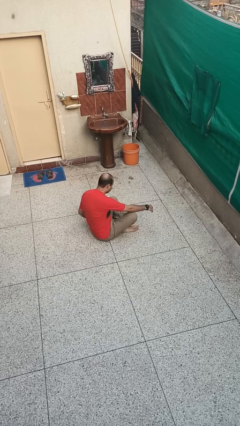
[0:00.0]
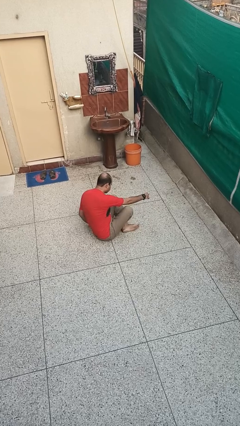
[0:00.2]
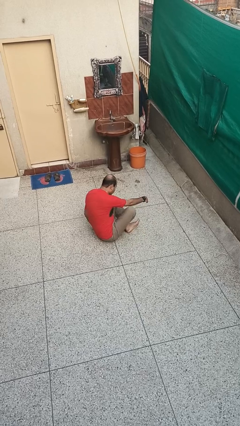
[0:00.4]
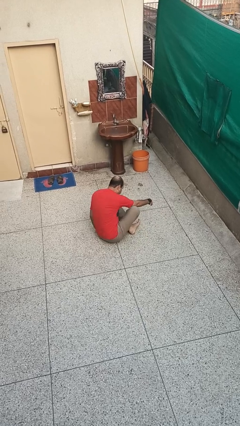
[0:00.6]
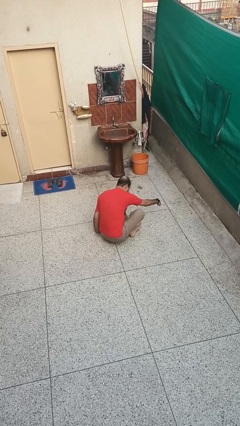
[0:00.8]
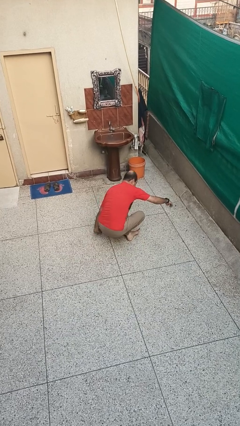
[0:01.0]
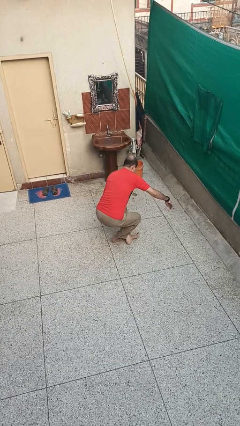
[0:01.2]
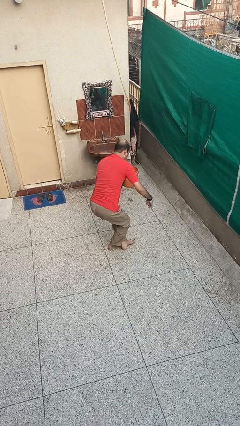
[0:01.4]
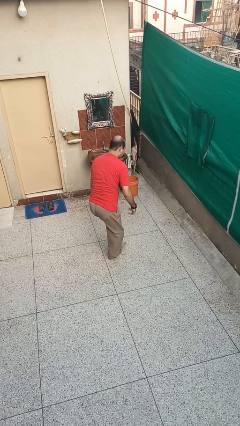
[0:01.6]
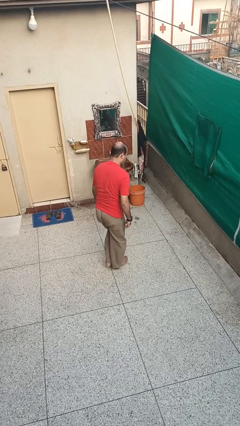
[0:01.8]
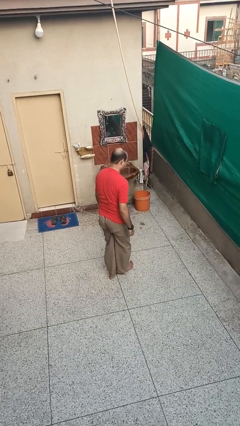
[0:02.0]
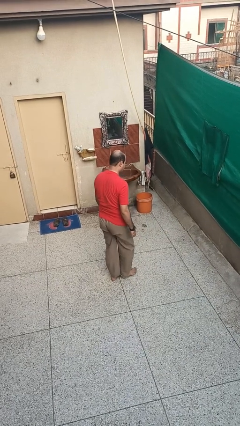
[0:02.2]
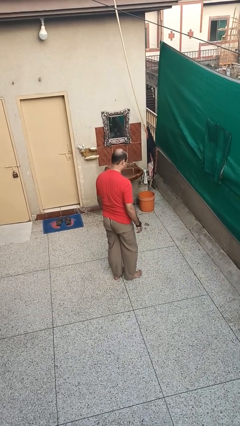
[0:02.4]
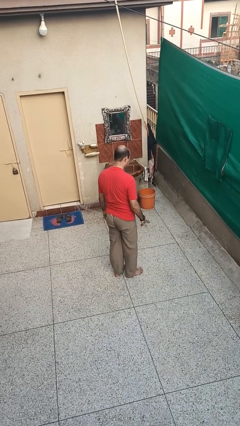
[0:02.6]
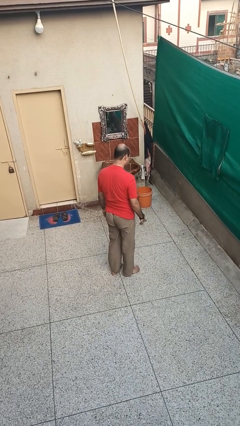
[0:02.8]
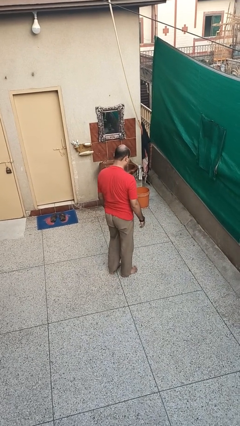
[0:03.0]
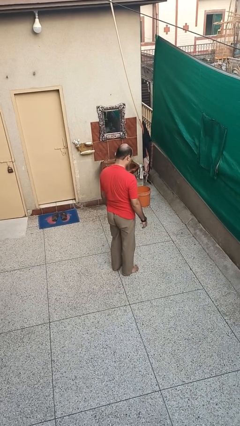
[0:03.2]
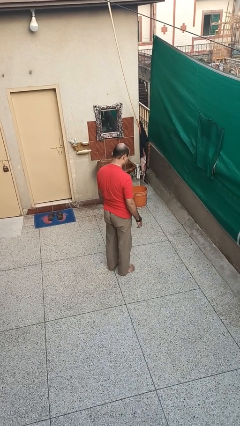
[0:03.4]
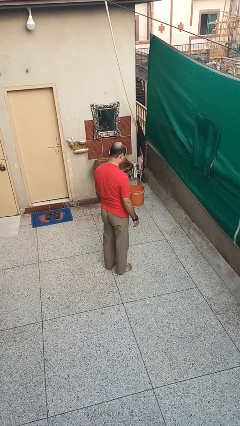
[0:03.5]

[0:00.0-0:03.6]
person stands up from floor

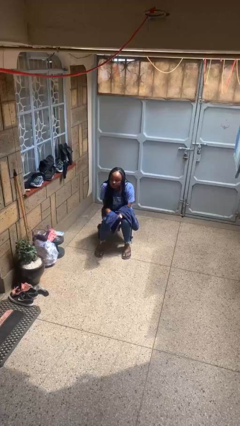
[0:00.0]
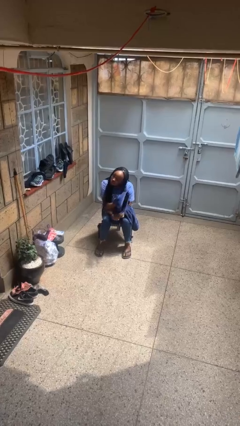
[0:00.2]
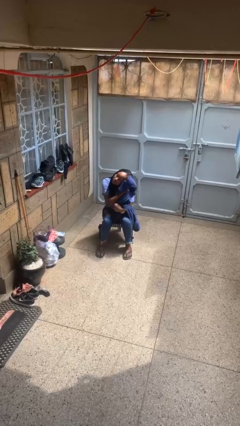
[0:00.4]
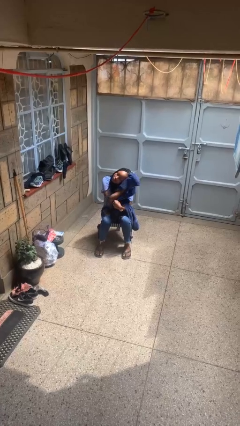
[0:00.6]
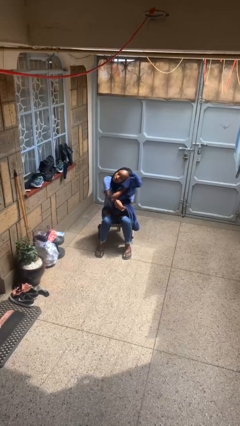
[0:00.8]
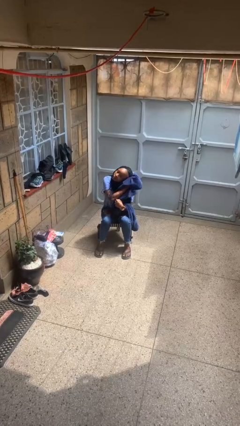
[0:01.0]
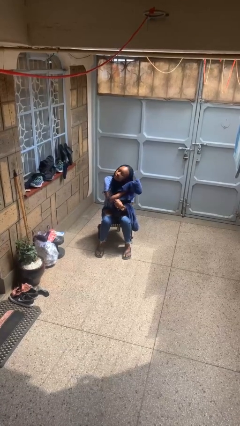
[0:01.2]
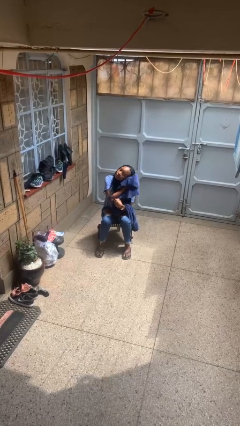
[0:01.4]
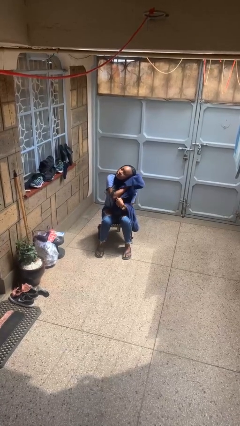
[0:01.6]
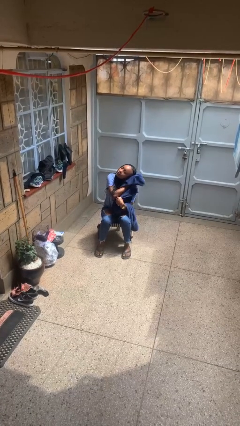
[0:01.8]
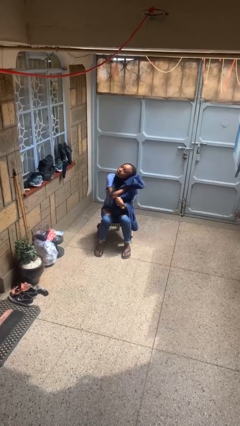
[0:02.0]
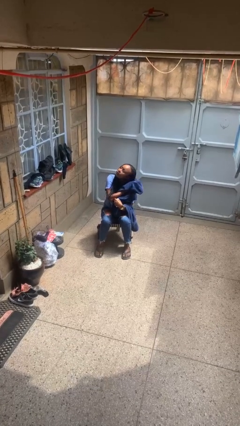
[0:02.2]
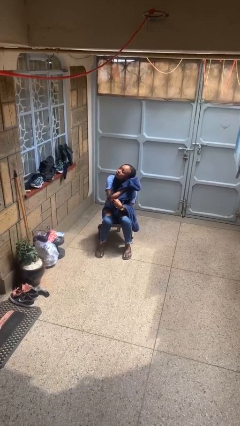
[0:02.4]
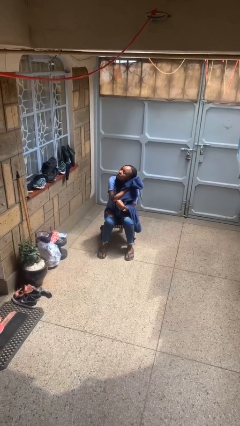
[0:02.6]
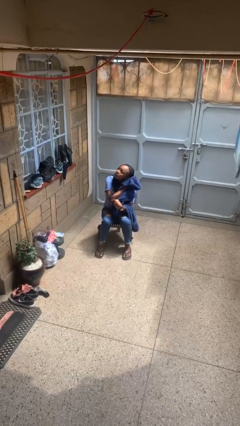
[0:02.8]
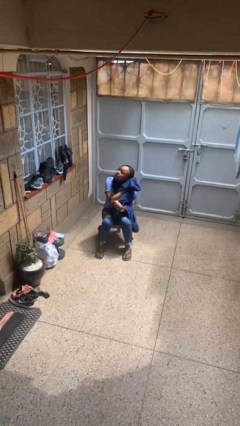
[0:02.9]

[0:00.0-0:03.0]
person dries hair with towel

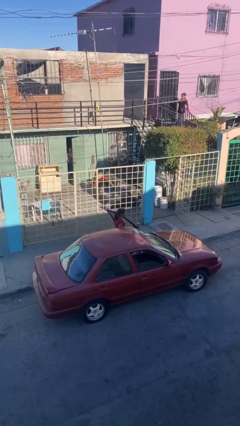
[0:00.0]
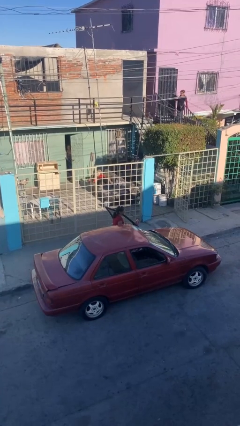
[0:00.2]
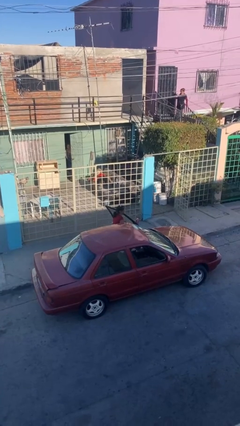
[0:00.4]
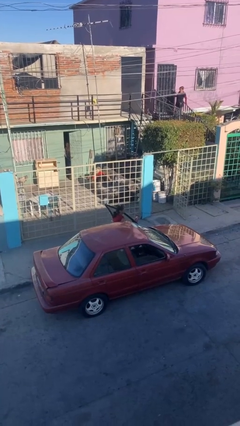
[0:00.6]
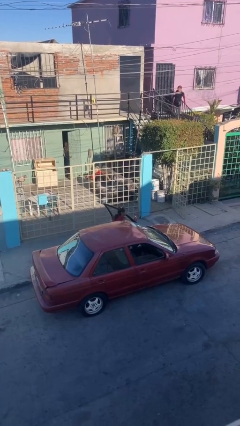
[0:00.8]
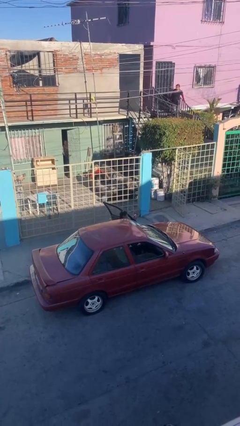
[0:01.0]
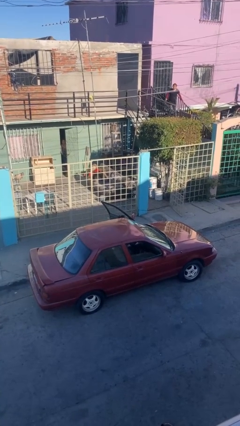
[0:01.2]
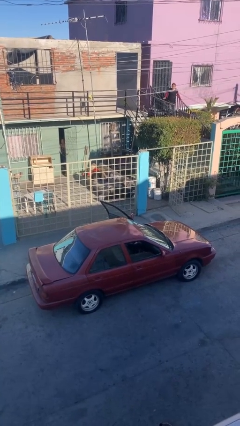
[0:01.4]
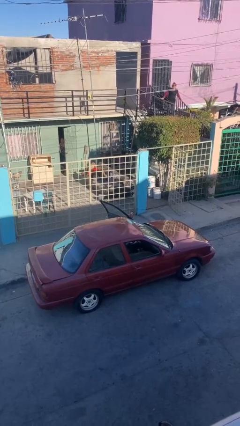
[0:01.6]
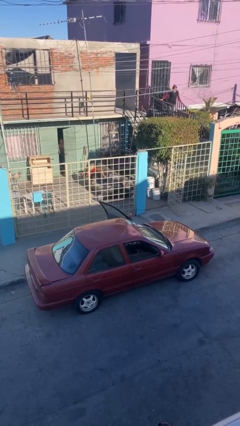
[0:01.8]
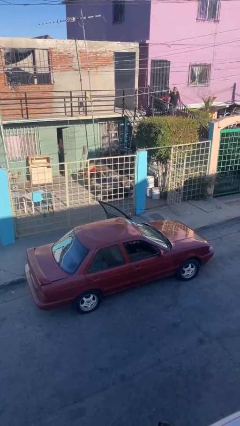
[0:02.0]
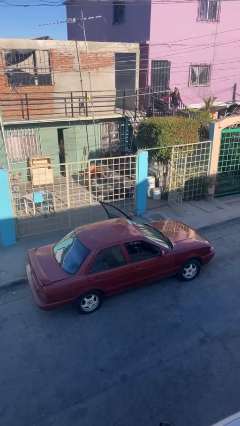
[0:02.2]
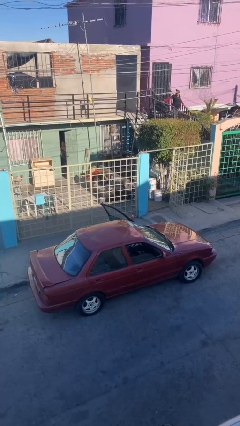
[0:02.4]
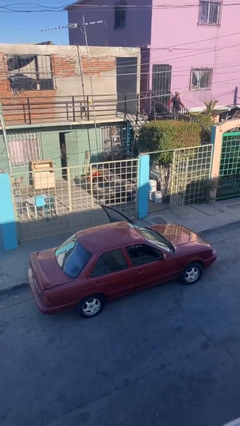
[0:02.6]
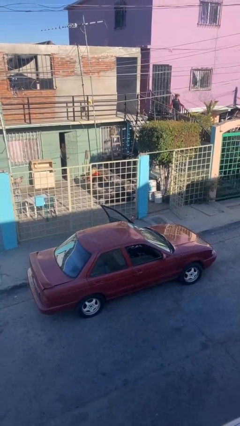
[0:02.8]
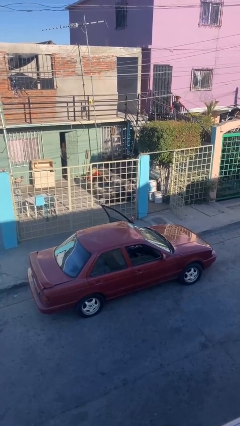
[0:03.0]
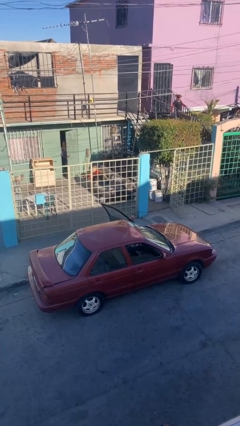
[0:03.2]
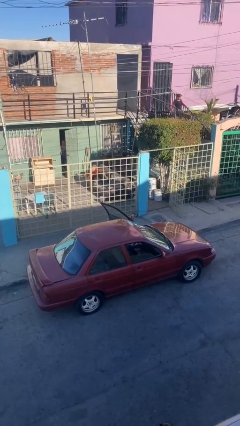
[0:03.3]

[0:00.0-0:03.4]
person enters car

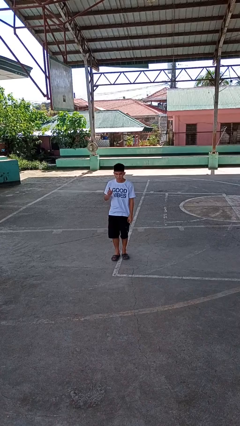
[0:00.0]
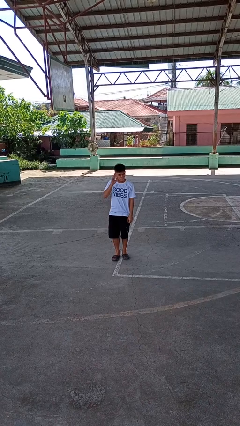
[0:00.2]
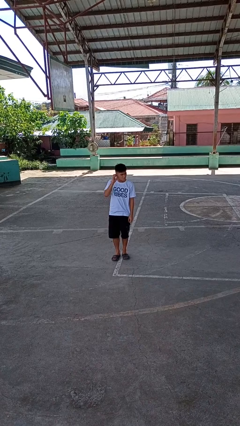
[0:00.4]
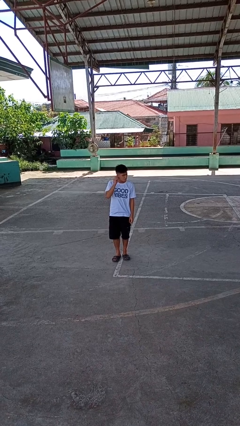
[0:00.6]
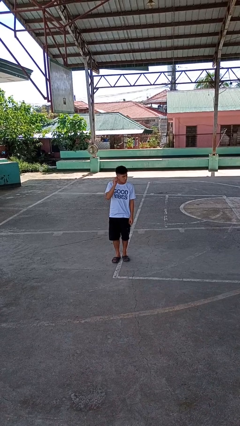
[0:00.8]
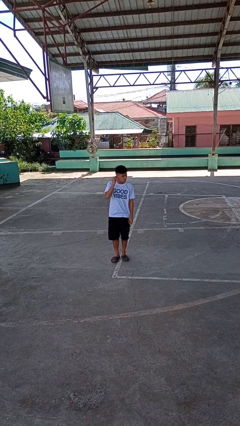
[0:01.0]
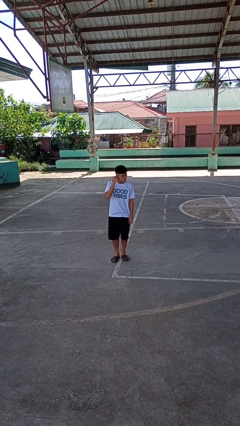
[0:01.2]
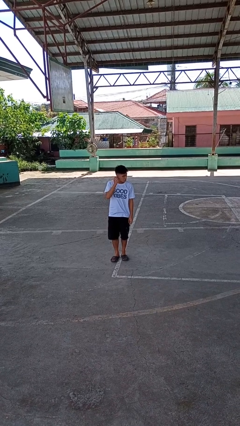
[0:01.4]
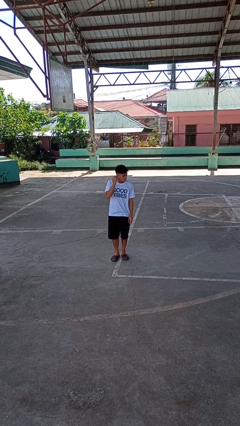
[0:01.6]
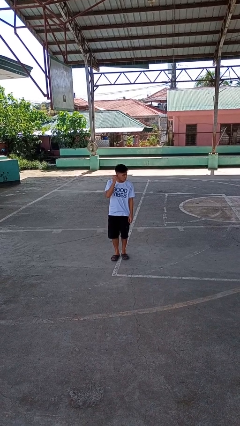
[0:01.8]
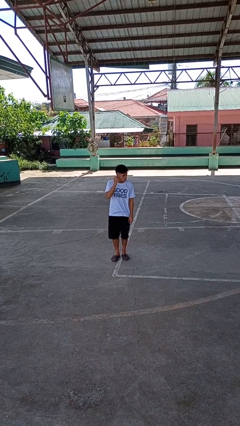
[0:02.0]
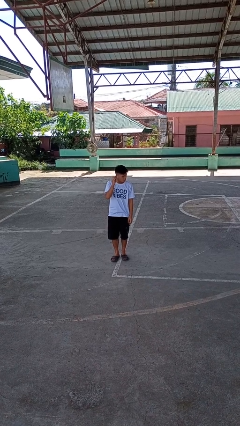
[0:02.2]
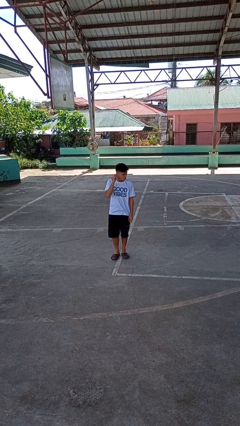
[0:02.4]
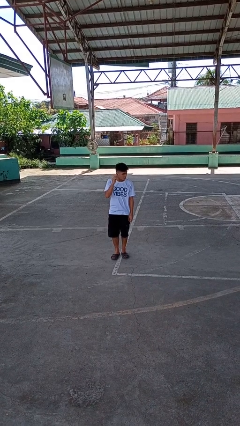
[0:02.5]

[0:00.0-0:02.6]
person touches earlobe

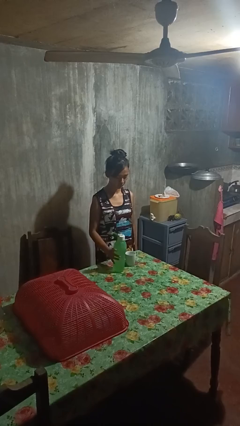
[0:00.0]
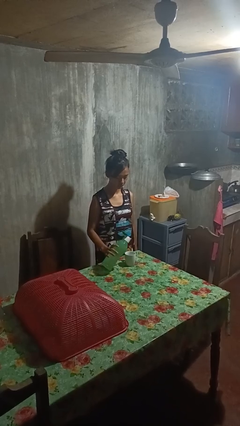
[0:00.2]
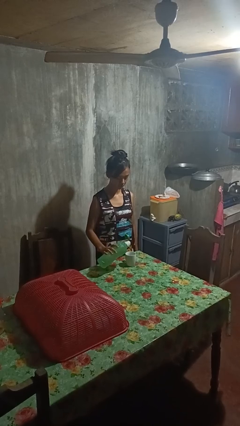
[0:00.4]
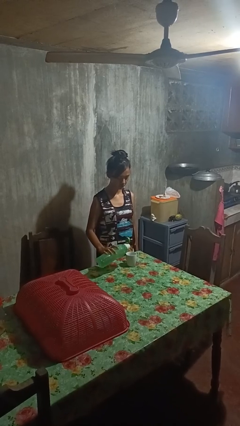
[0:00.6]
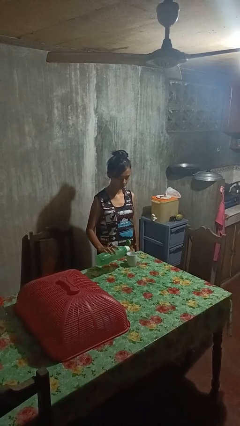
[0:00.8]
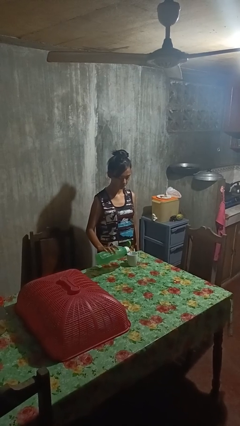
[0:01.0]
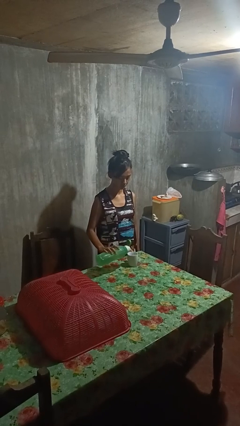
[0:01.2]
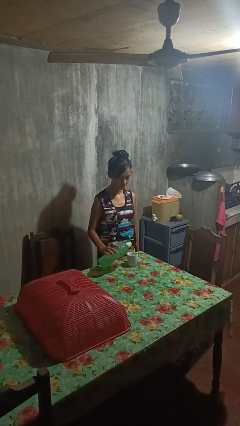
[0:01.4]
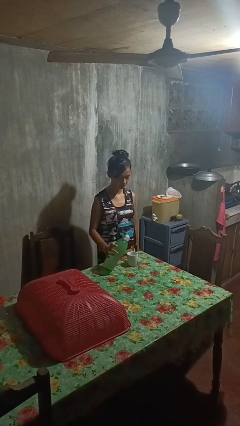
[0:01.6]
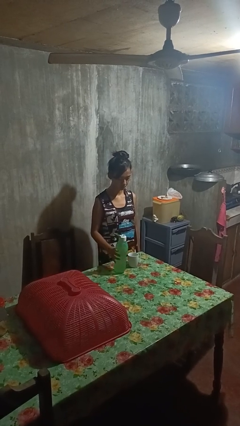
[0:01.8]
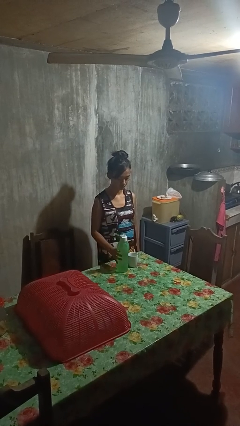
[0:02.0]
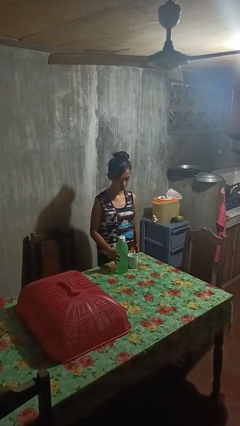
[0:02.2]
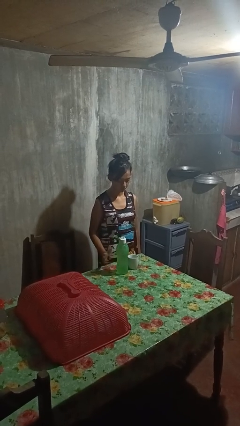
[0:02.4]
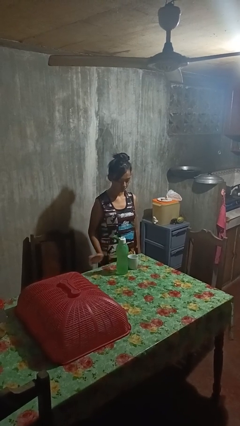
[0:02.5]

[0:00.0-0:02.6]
person pours liquid into cup

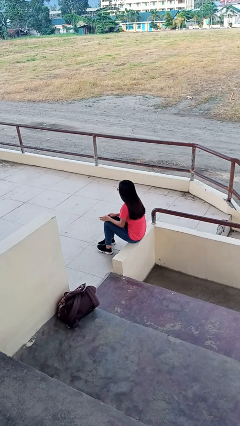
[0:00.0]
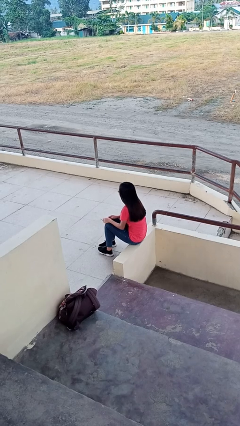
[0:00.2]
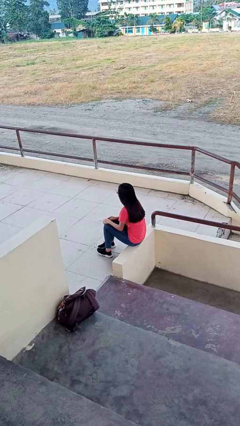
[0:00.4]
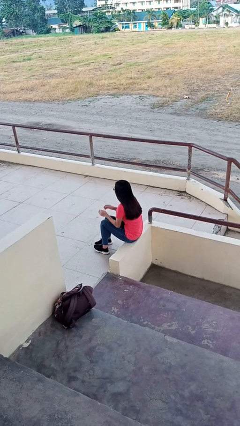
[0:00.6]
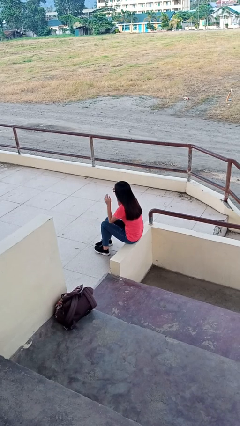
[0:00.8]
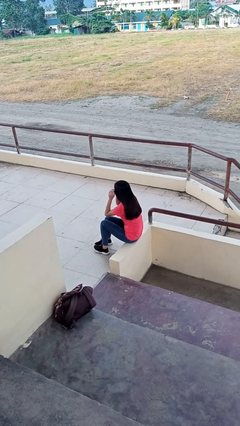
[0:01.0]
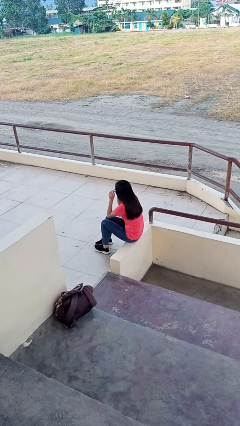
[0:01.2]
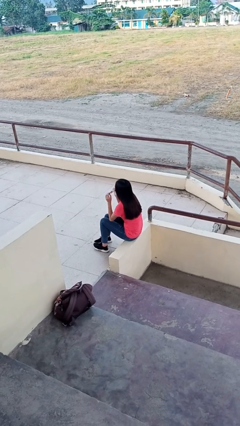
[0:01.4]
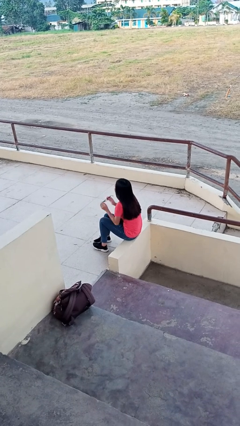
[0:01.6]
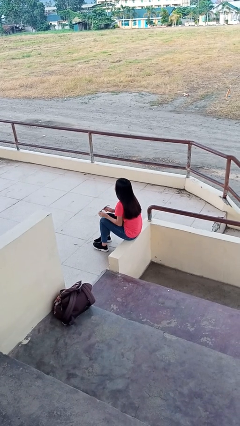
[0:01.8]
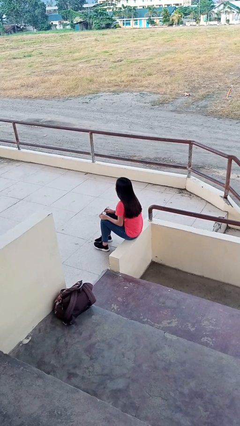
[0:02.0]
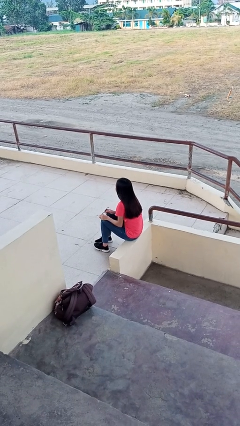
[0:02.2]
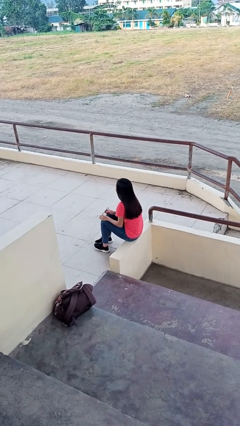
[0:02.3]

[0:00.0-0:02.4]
person takes off glasses

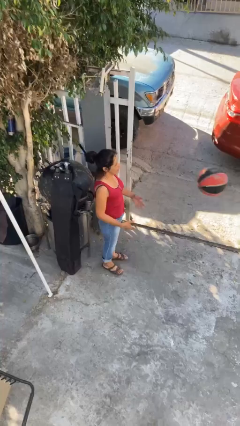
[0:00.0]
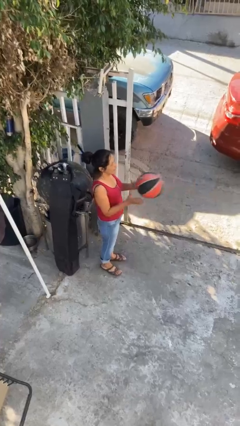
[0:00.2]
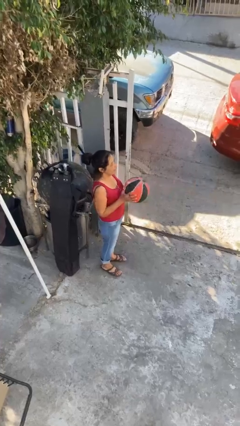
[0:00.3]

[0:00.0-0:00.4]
person catches object from person
